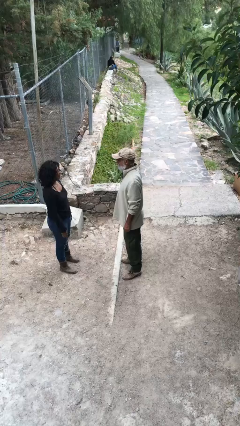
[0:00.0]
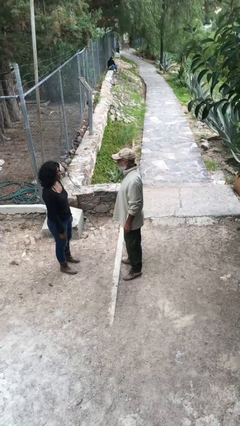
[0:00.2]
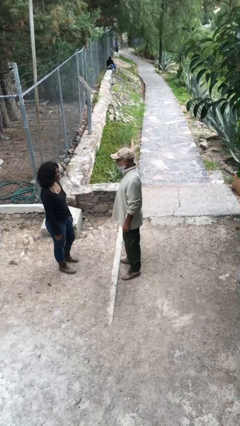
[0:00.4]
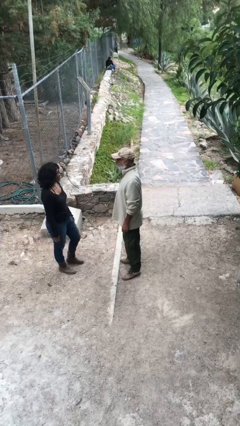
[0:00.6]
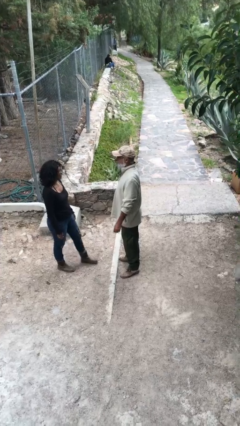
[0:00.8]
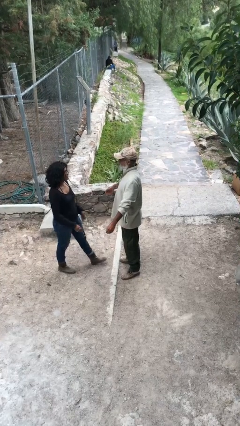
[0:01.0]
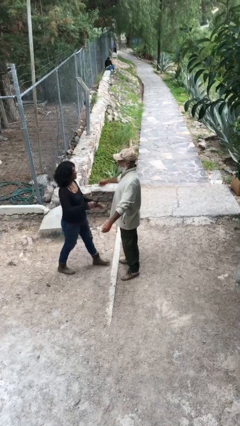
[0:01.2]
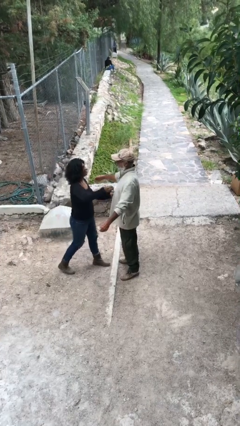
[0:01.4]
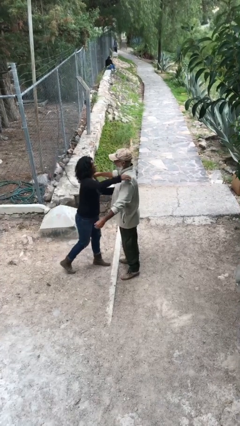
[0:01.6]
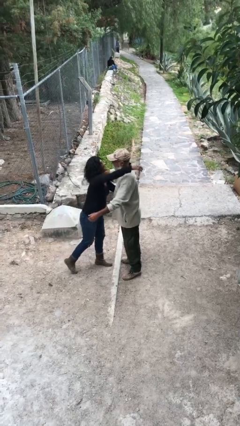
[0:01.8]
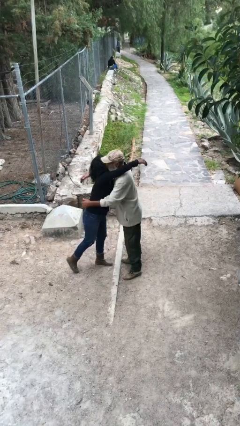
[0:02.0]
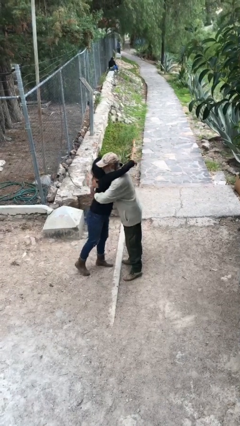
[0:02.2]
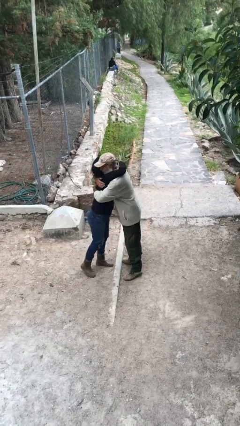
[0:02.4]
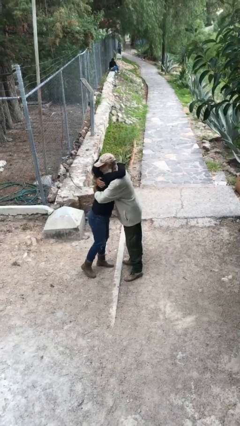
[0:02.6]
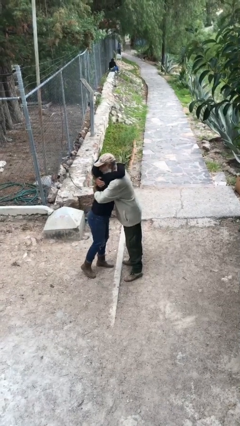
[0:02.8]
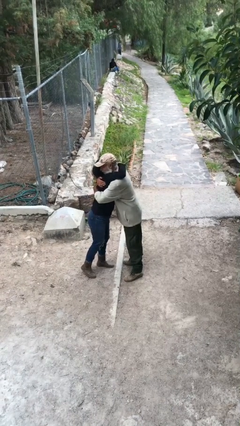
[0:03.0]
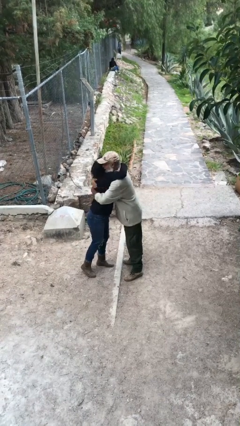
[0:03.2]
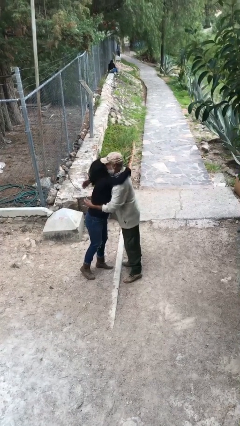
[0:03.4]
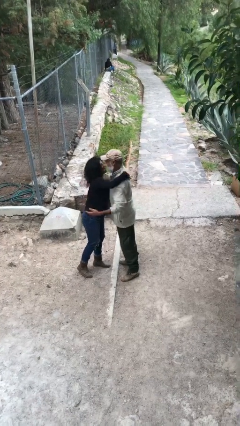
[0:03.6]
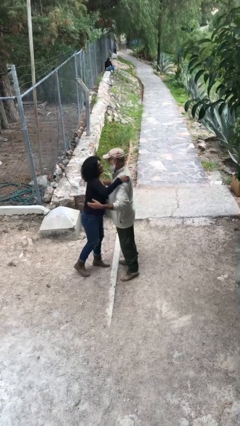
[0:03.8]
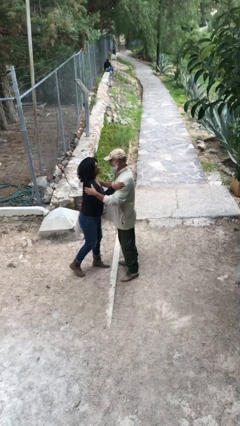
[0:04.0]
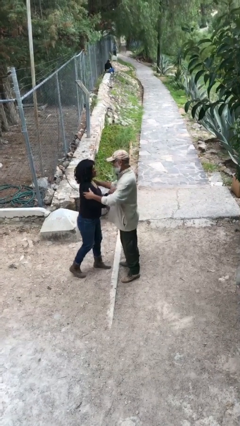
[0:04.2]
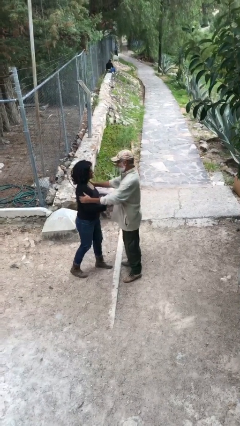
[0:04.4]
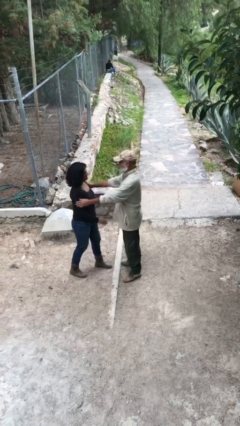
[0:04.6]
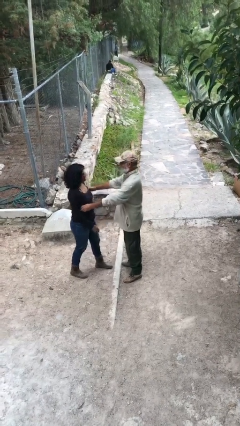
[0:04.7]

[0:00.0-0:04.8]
person embraces person

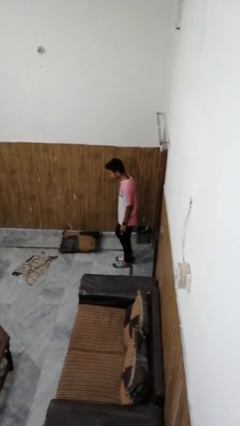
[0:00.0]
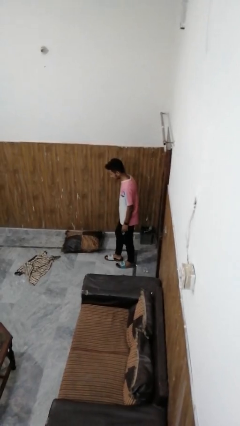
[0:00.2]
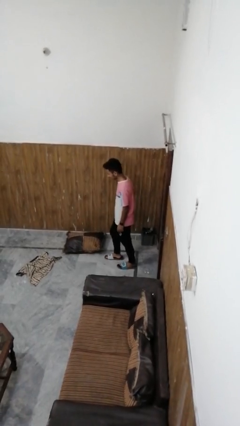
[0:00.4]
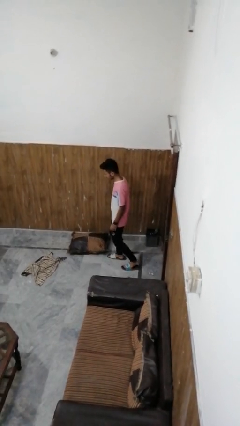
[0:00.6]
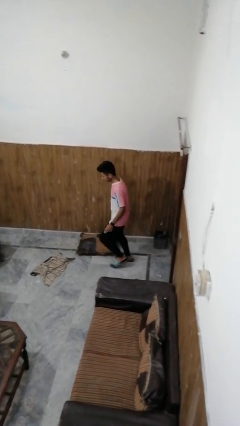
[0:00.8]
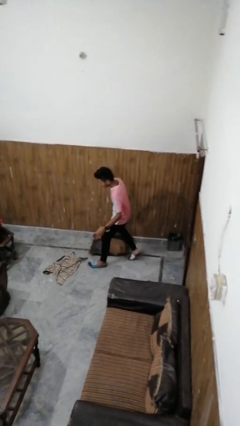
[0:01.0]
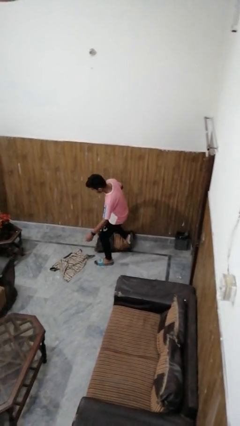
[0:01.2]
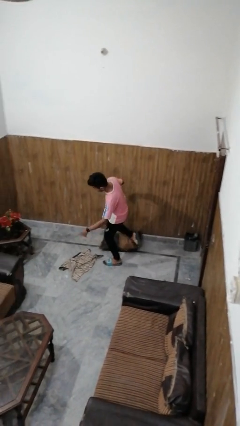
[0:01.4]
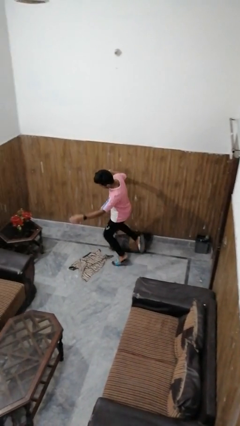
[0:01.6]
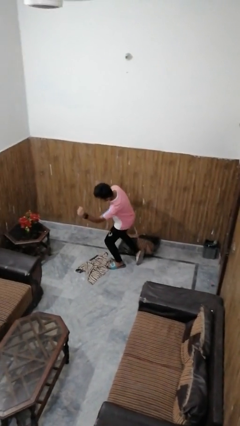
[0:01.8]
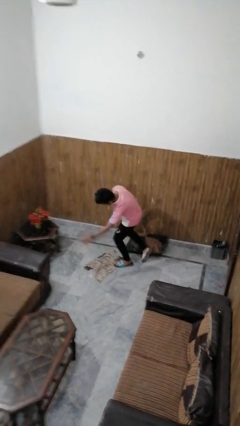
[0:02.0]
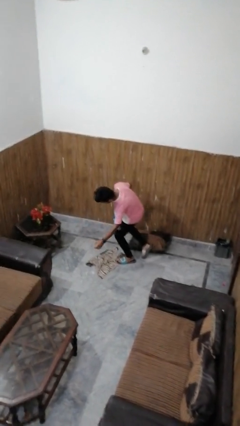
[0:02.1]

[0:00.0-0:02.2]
person trips on object on floor

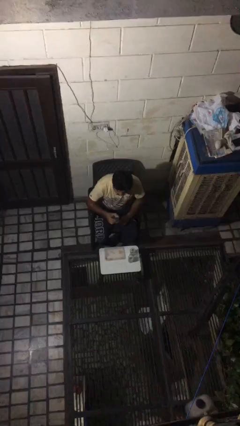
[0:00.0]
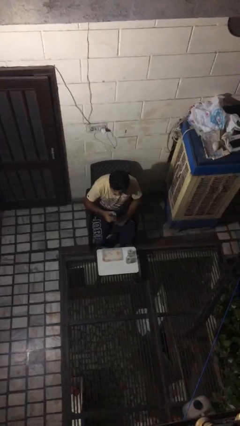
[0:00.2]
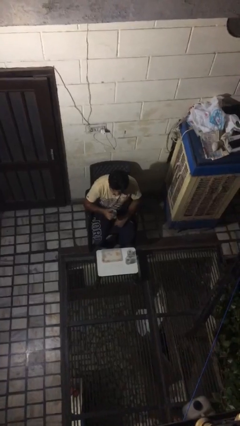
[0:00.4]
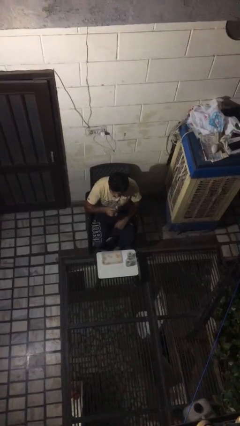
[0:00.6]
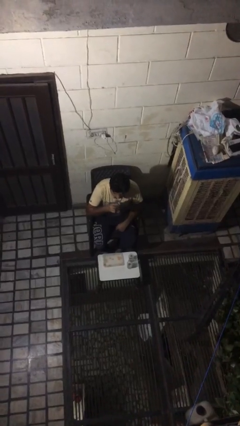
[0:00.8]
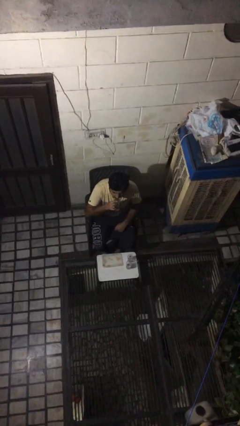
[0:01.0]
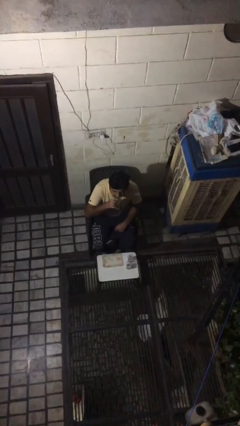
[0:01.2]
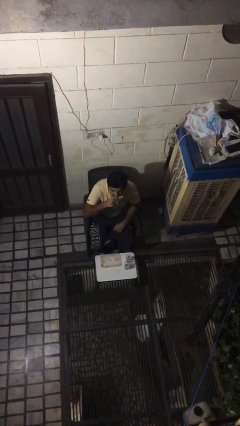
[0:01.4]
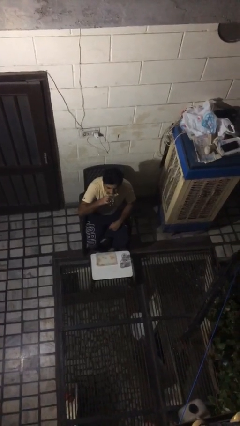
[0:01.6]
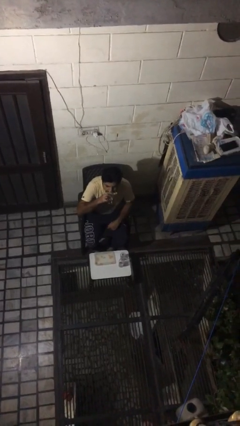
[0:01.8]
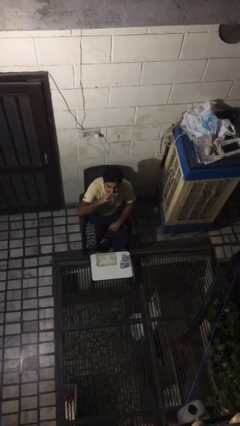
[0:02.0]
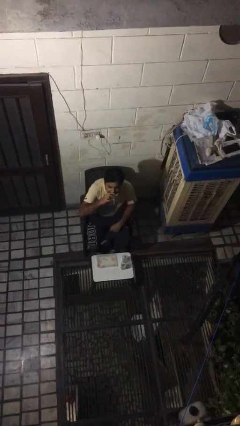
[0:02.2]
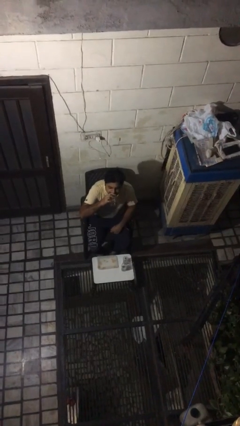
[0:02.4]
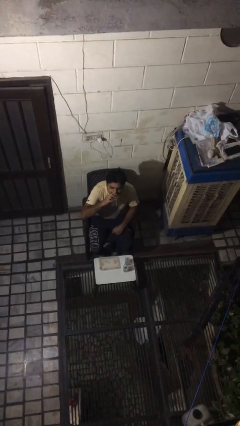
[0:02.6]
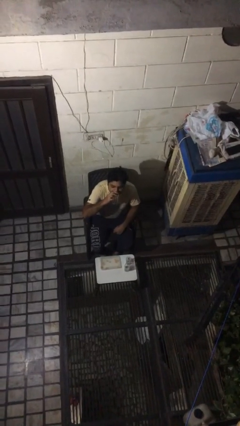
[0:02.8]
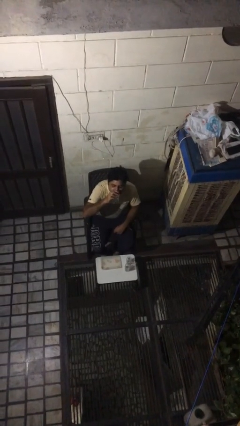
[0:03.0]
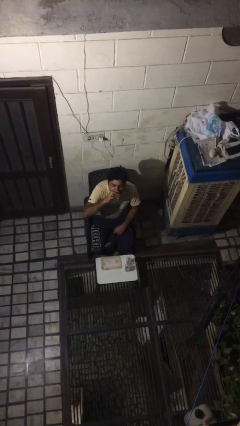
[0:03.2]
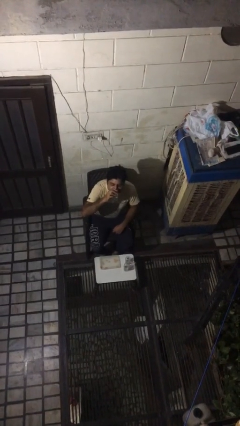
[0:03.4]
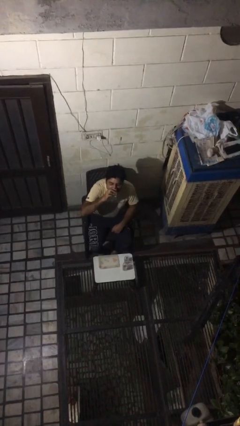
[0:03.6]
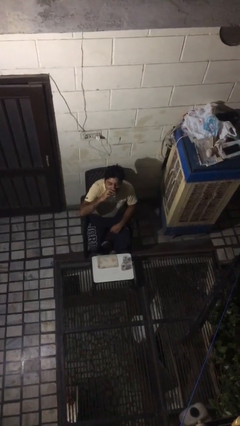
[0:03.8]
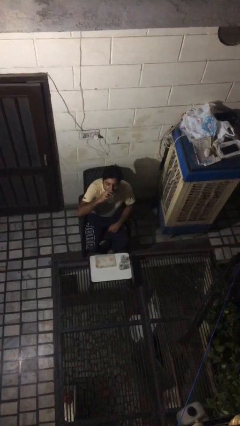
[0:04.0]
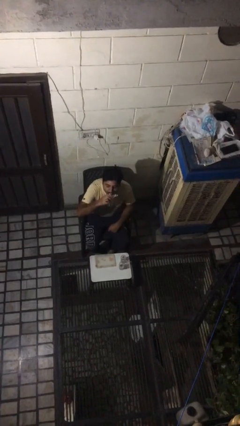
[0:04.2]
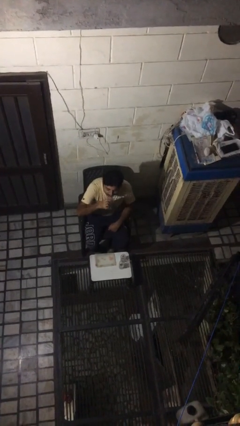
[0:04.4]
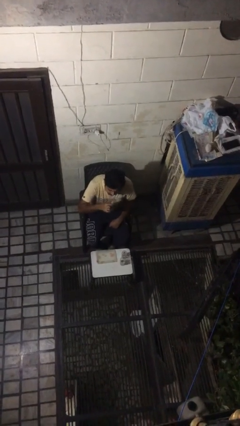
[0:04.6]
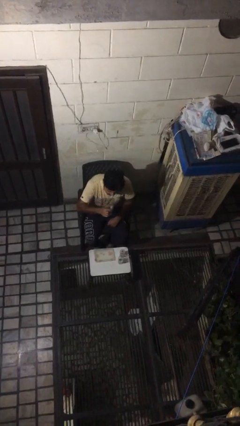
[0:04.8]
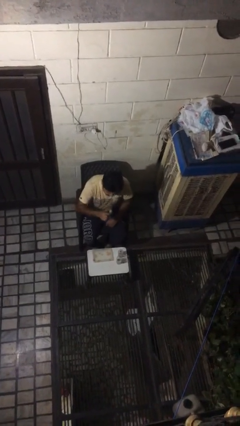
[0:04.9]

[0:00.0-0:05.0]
person drinks from shotglass

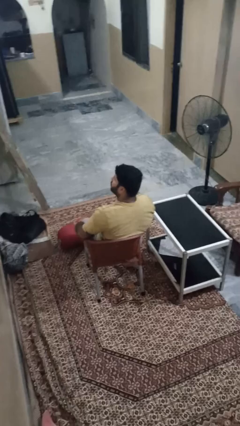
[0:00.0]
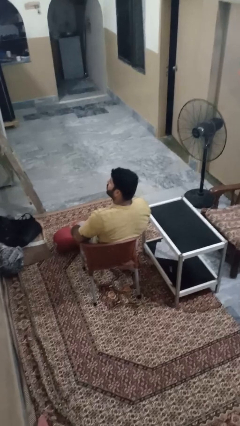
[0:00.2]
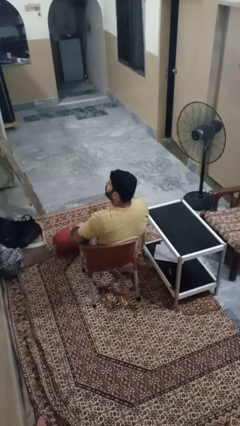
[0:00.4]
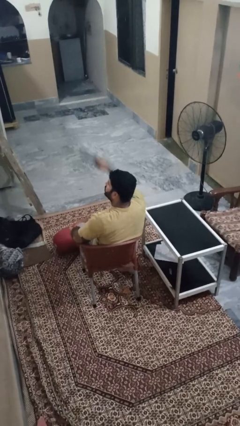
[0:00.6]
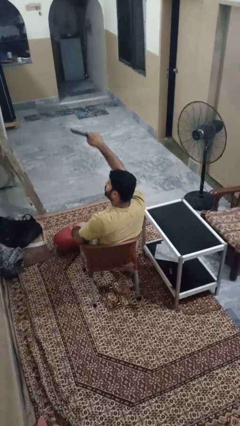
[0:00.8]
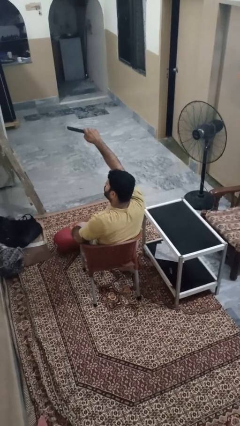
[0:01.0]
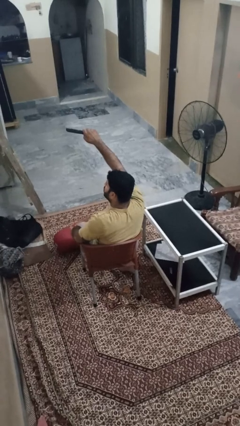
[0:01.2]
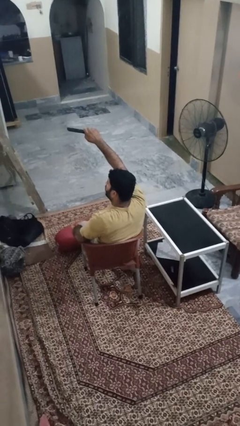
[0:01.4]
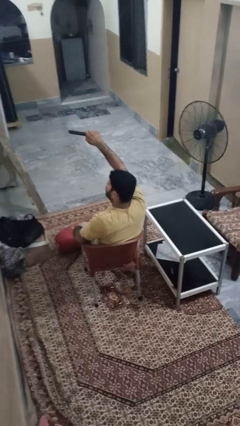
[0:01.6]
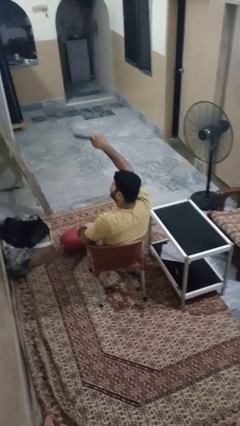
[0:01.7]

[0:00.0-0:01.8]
person uses television remote

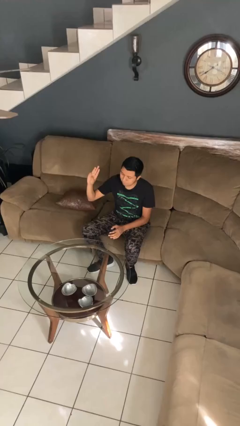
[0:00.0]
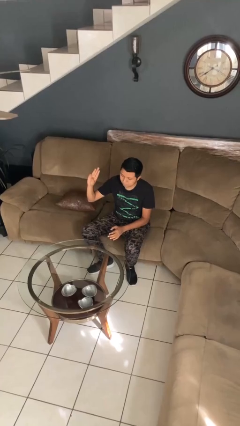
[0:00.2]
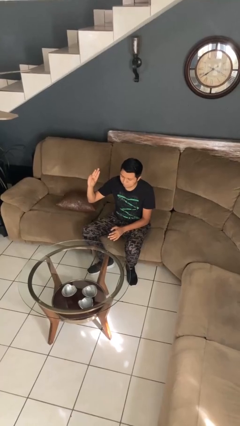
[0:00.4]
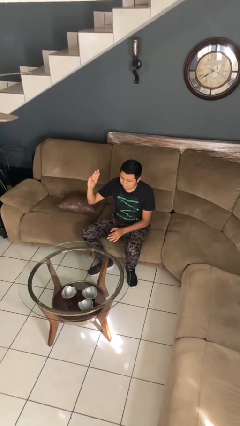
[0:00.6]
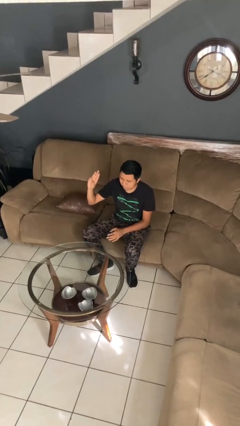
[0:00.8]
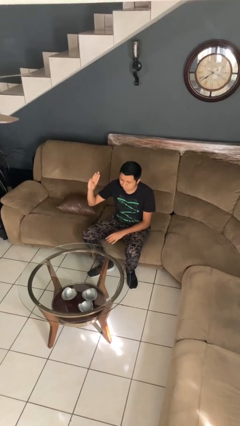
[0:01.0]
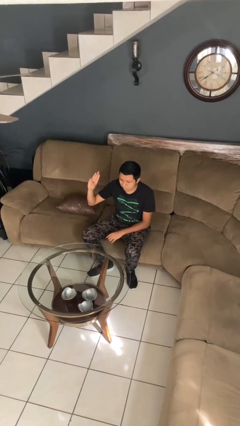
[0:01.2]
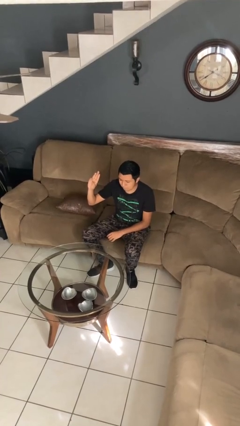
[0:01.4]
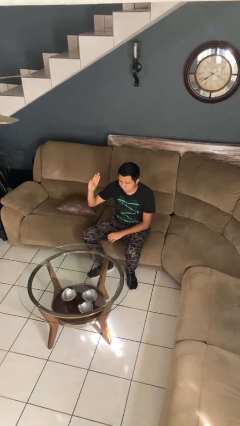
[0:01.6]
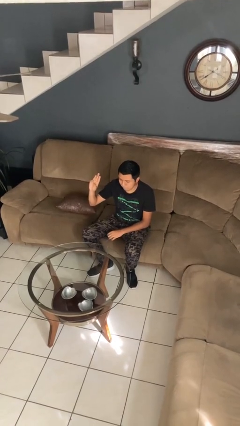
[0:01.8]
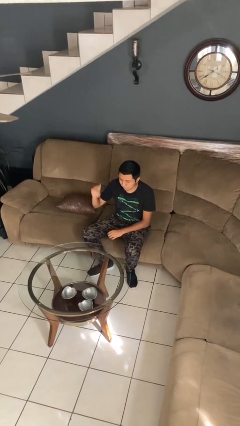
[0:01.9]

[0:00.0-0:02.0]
person gestures number three

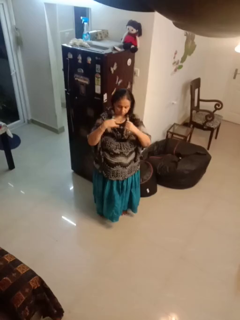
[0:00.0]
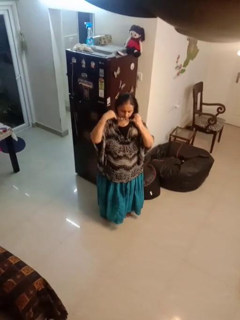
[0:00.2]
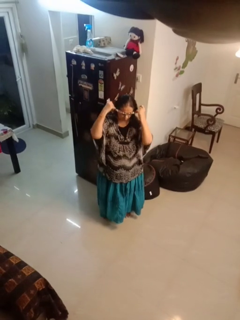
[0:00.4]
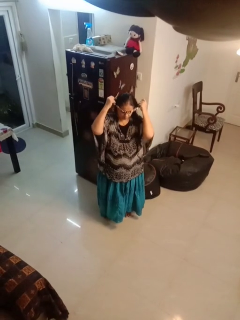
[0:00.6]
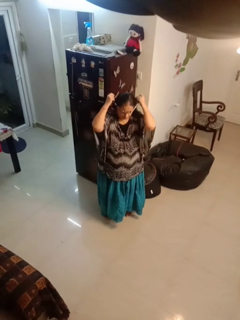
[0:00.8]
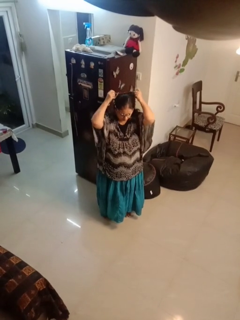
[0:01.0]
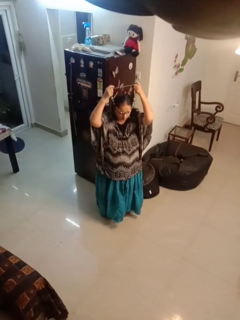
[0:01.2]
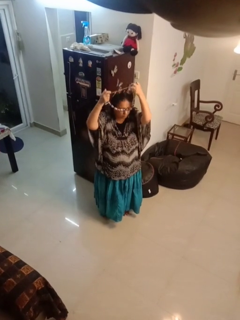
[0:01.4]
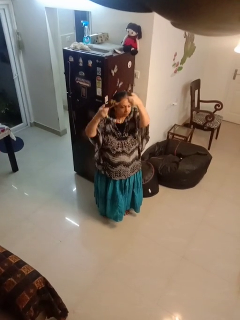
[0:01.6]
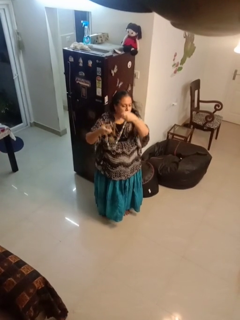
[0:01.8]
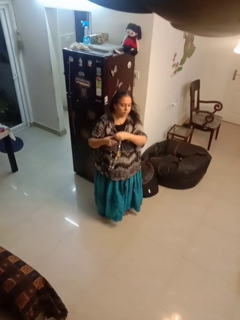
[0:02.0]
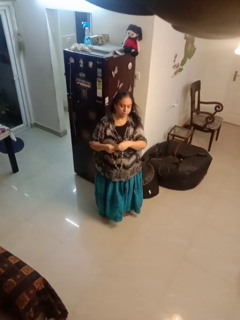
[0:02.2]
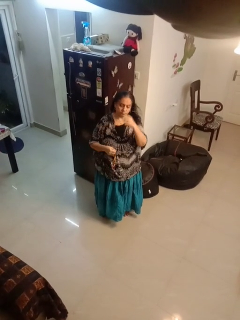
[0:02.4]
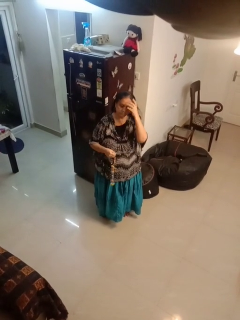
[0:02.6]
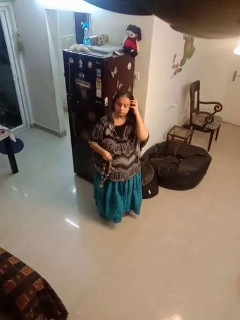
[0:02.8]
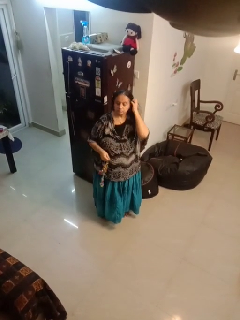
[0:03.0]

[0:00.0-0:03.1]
person takes off necklace
